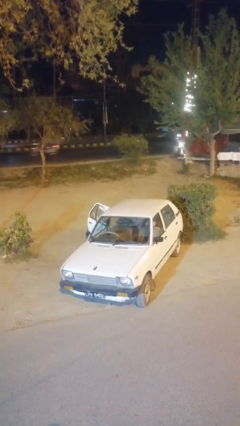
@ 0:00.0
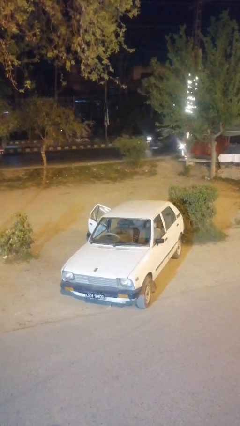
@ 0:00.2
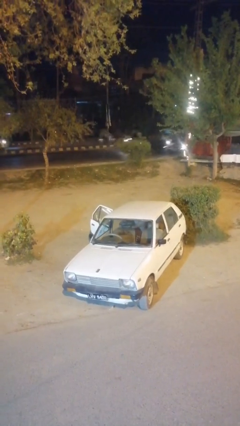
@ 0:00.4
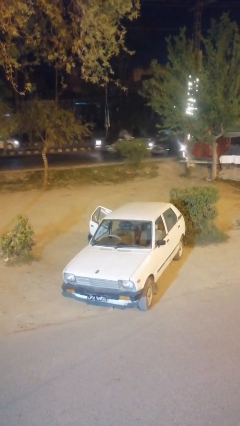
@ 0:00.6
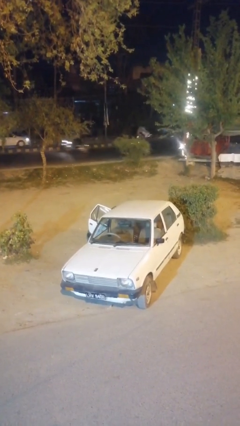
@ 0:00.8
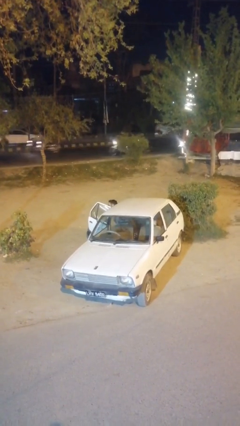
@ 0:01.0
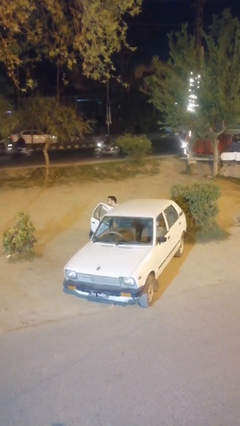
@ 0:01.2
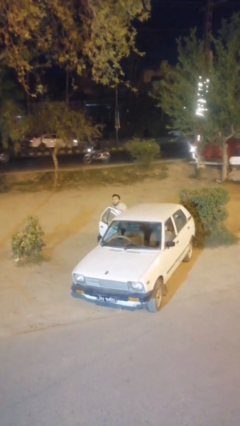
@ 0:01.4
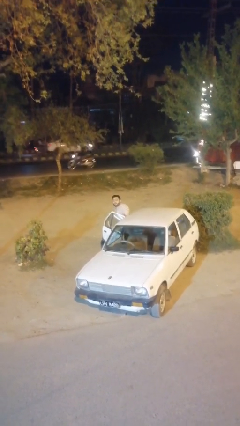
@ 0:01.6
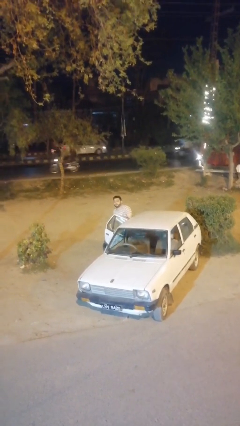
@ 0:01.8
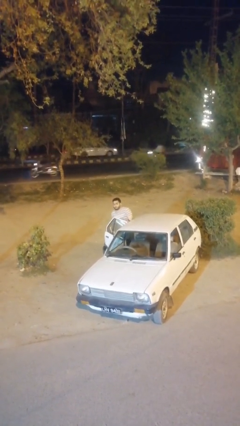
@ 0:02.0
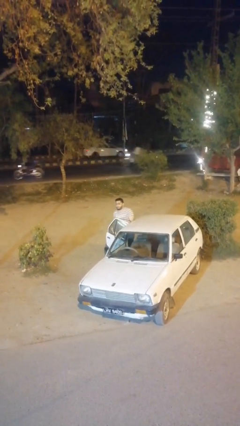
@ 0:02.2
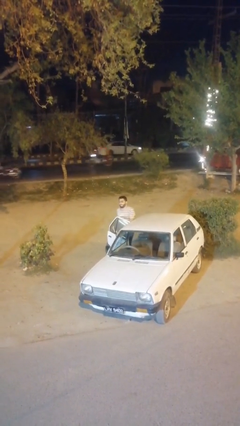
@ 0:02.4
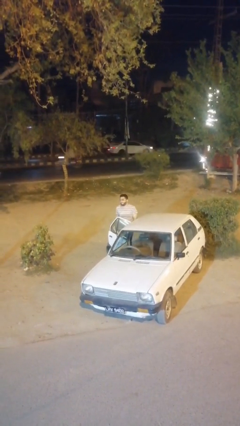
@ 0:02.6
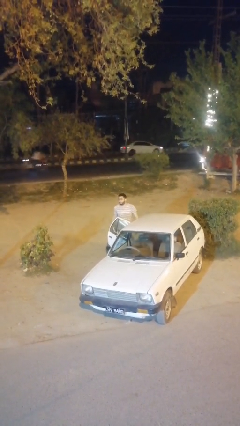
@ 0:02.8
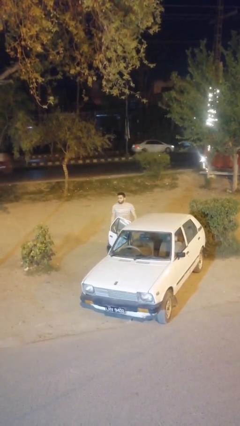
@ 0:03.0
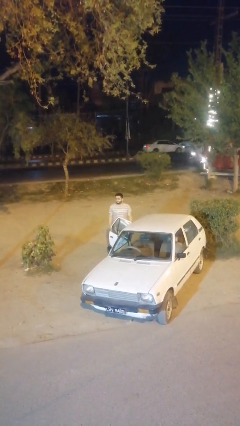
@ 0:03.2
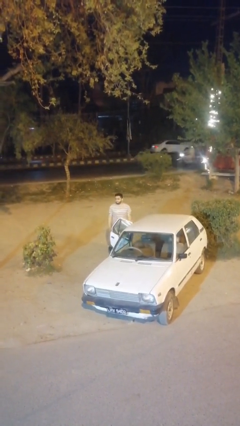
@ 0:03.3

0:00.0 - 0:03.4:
person exits car

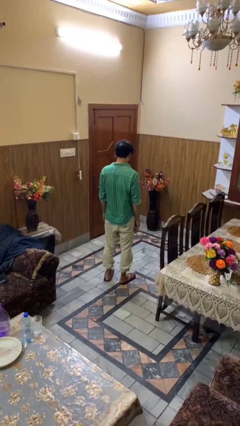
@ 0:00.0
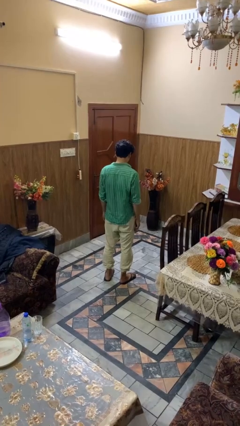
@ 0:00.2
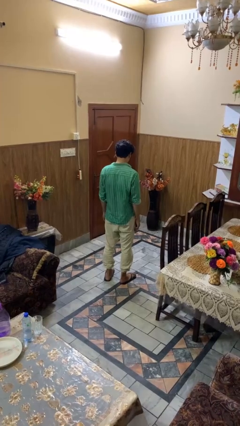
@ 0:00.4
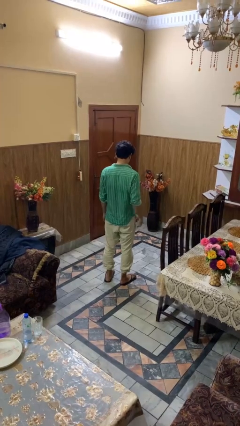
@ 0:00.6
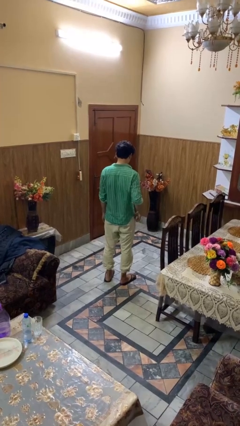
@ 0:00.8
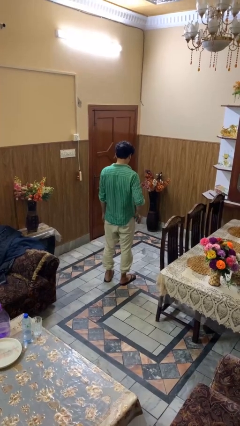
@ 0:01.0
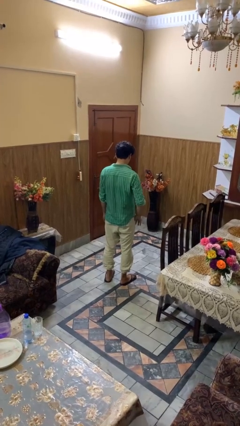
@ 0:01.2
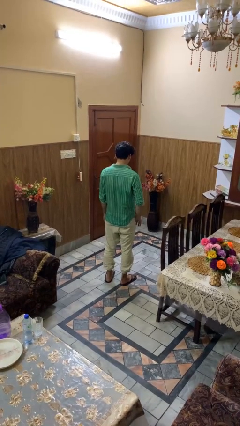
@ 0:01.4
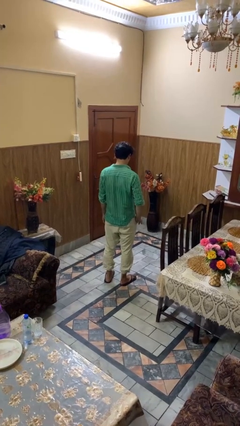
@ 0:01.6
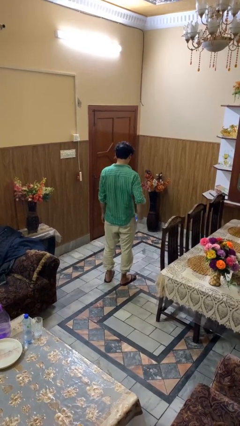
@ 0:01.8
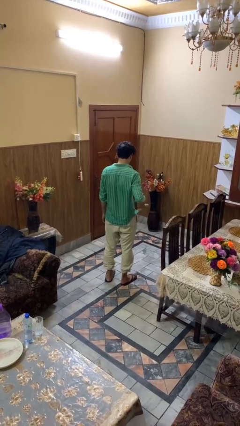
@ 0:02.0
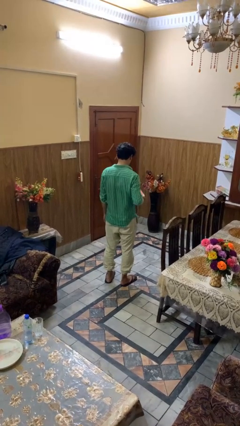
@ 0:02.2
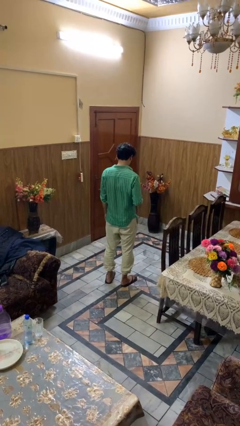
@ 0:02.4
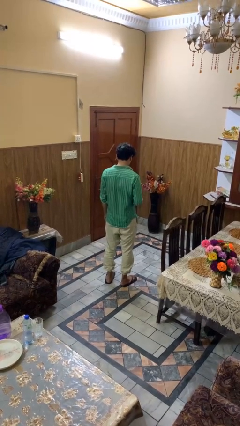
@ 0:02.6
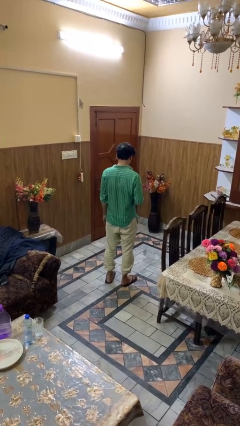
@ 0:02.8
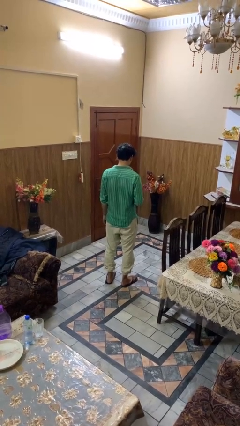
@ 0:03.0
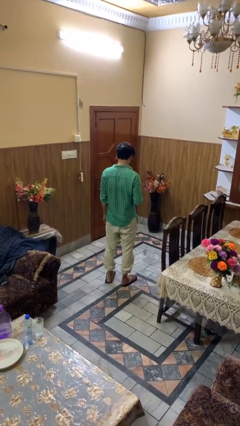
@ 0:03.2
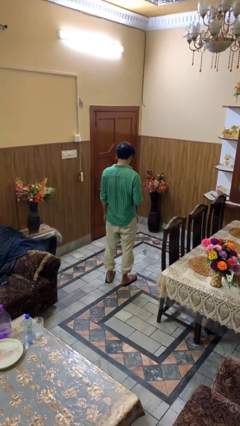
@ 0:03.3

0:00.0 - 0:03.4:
person takes phone from pocket

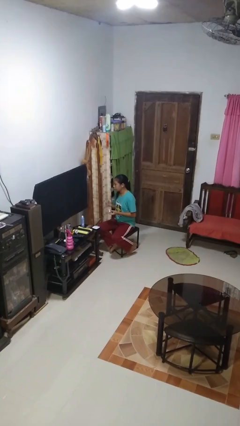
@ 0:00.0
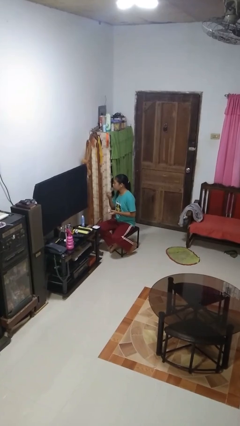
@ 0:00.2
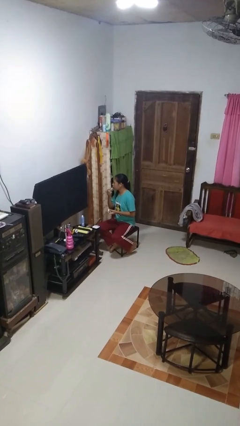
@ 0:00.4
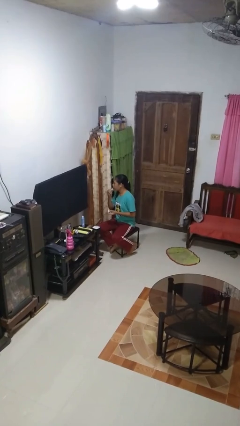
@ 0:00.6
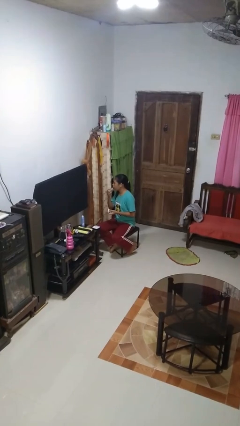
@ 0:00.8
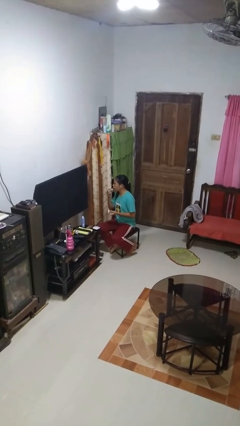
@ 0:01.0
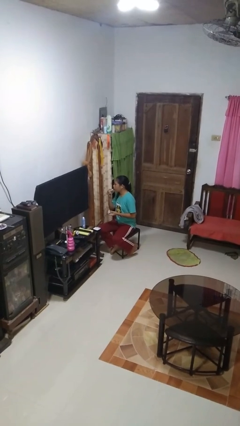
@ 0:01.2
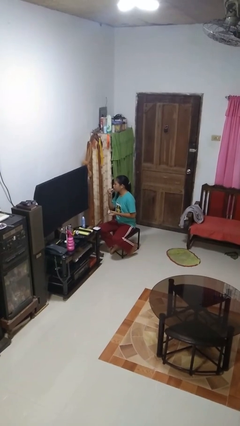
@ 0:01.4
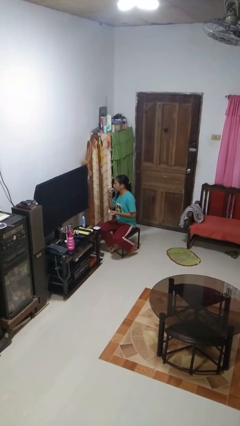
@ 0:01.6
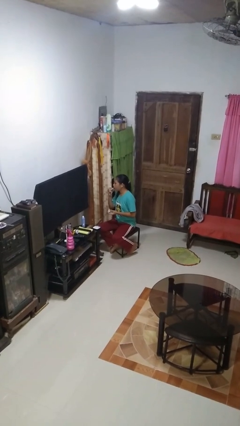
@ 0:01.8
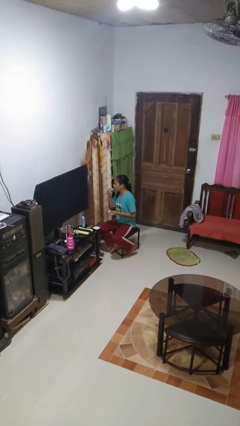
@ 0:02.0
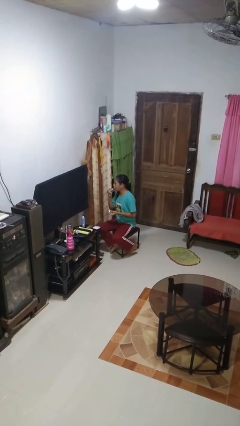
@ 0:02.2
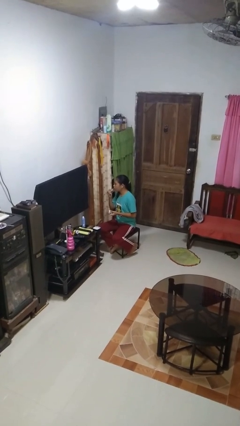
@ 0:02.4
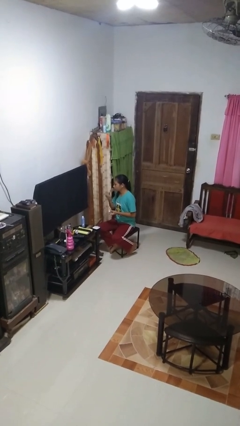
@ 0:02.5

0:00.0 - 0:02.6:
person applies lip makeup

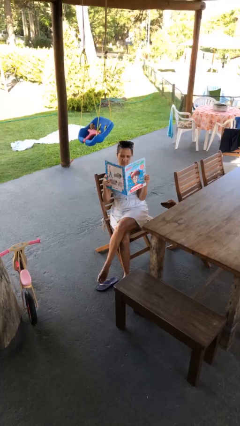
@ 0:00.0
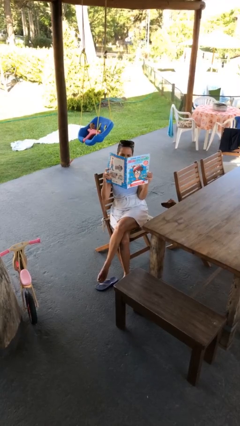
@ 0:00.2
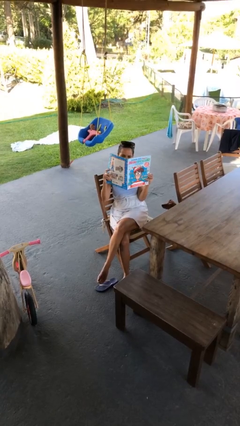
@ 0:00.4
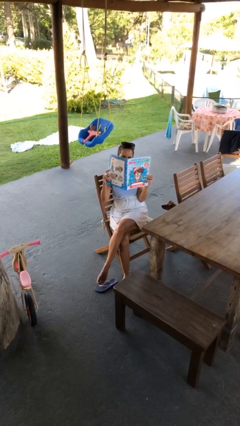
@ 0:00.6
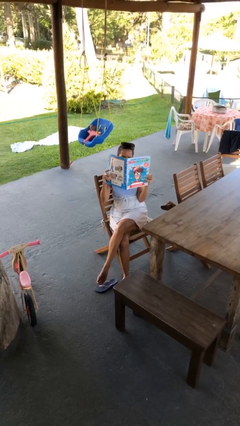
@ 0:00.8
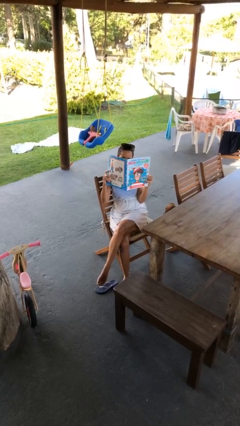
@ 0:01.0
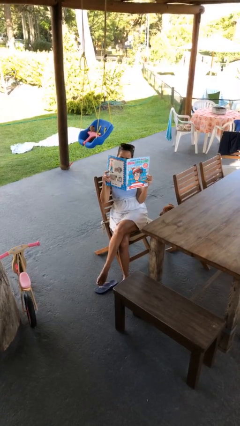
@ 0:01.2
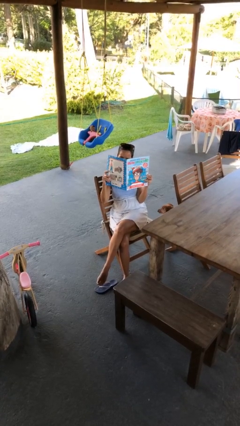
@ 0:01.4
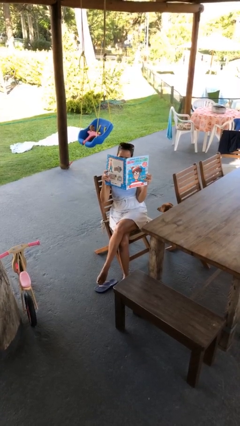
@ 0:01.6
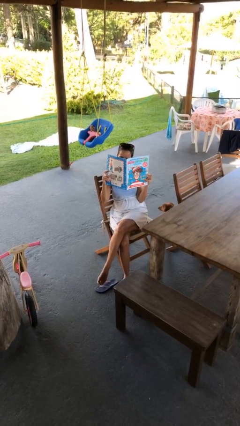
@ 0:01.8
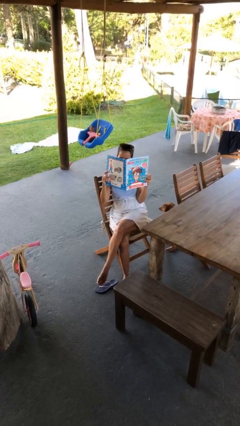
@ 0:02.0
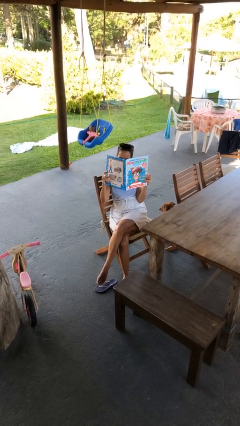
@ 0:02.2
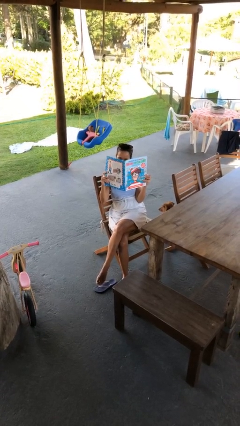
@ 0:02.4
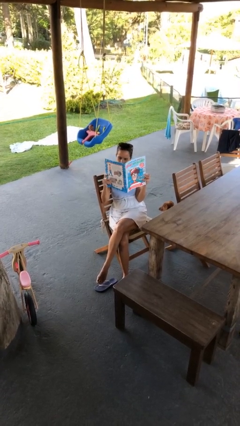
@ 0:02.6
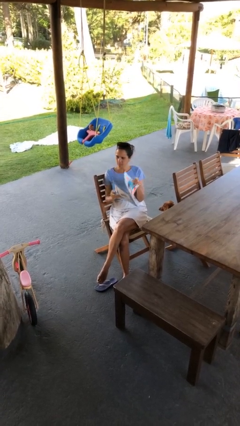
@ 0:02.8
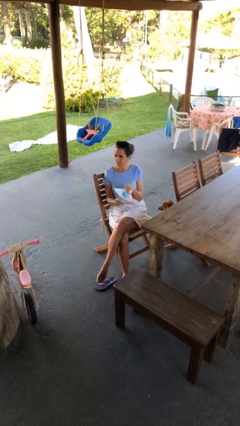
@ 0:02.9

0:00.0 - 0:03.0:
person reads document

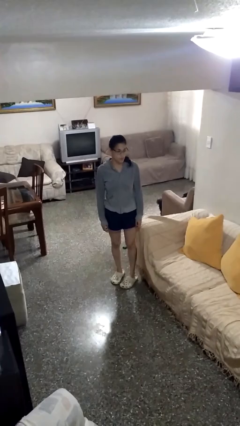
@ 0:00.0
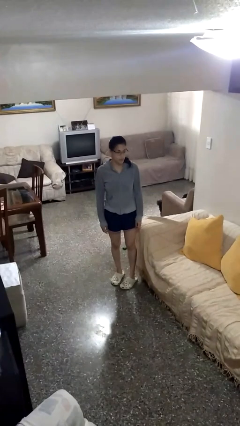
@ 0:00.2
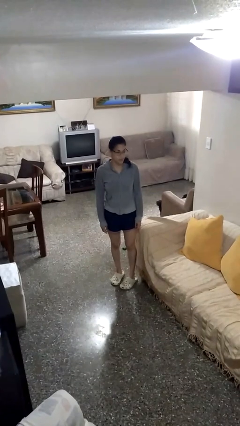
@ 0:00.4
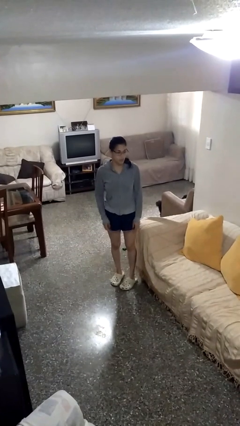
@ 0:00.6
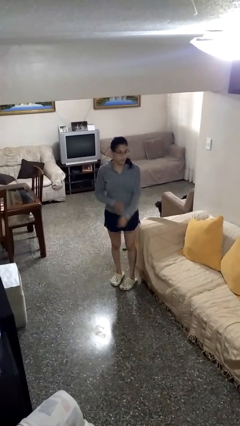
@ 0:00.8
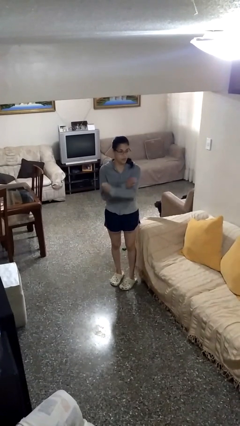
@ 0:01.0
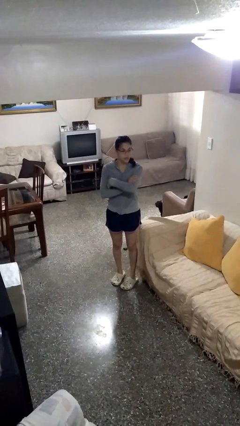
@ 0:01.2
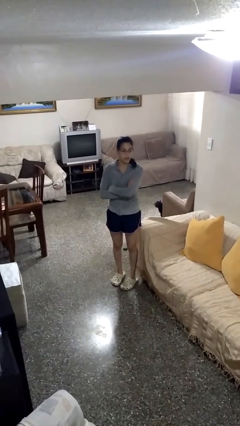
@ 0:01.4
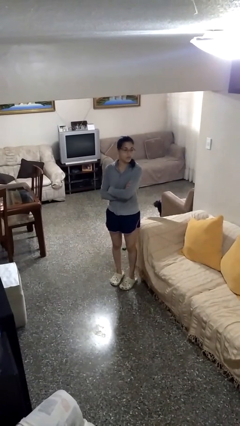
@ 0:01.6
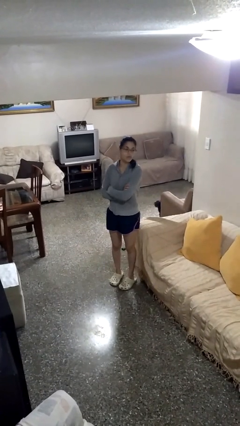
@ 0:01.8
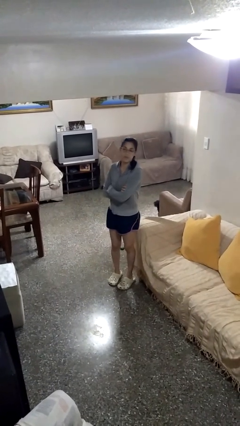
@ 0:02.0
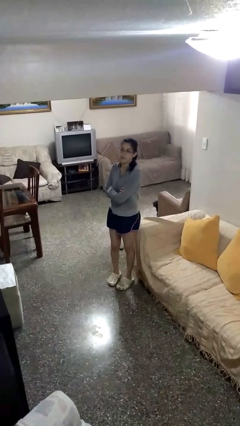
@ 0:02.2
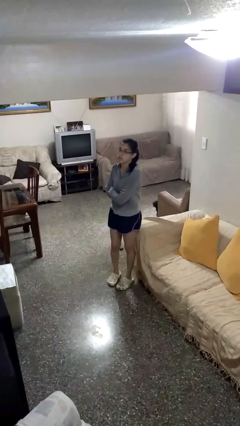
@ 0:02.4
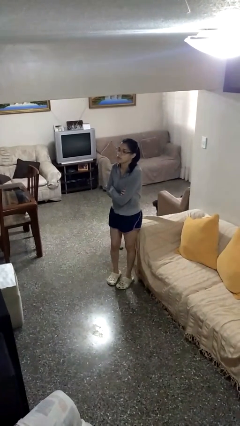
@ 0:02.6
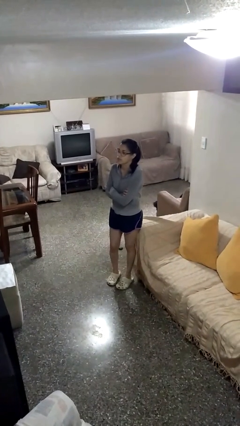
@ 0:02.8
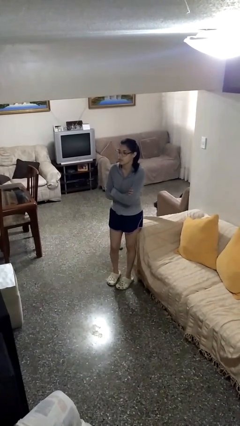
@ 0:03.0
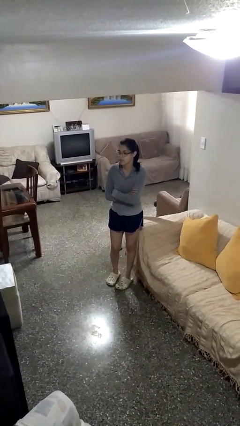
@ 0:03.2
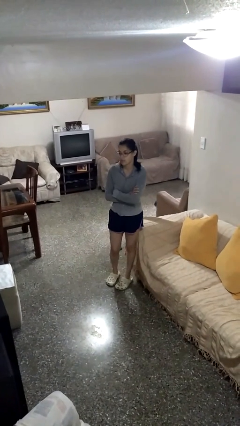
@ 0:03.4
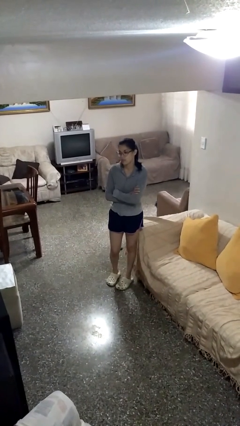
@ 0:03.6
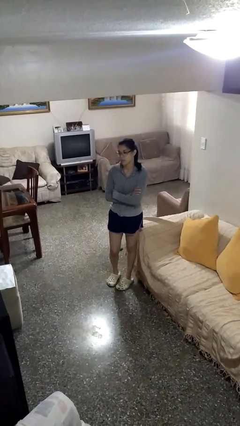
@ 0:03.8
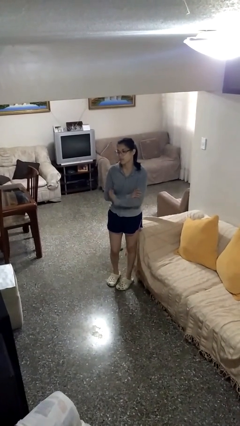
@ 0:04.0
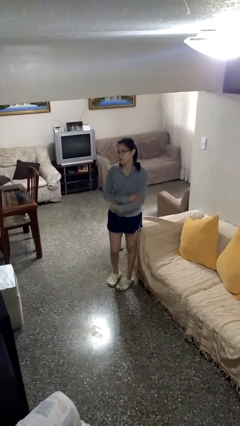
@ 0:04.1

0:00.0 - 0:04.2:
person crosses arms

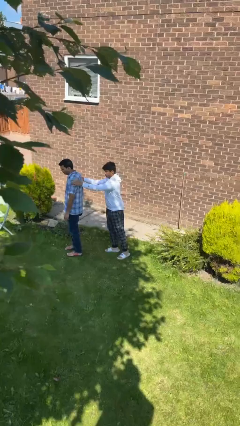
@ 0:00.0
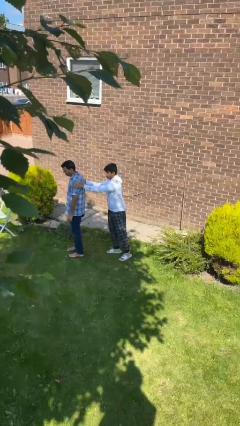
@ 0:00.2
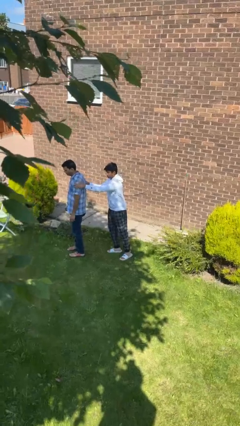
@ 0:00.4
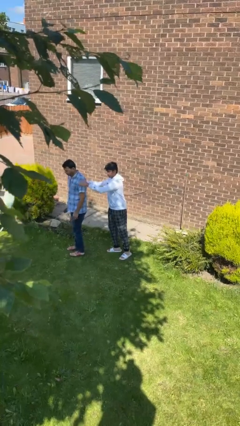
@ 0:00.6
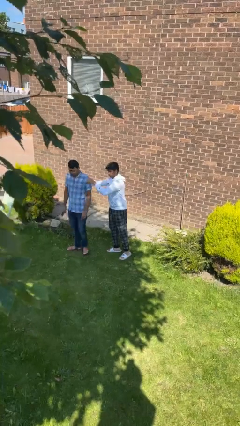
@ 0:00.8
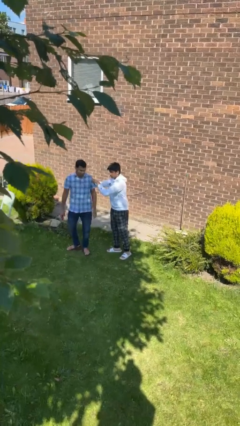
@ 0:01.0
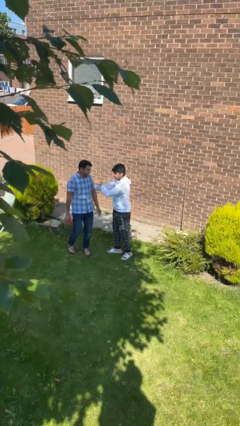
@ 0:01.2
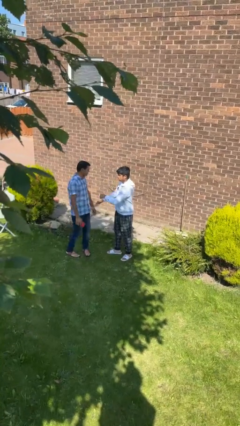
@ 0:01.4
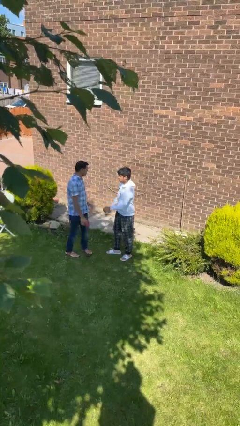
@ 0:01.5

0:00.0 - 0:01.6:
person spins person around
